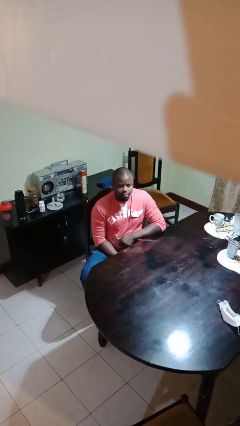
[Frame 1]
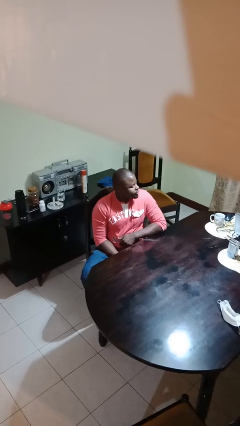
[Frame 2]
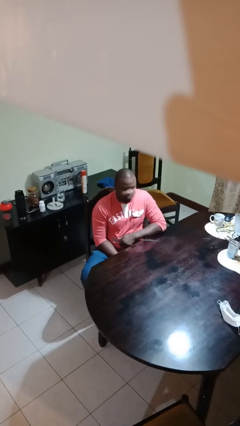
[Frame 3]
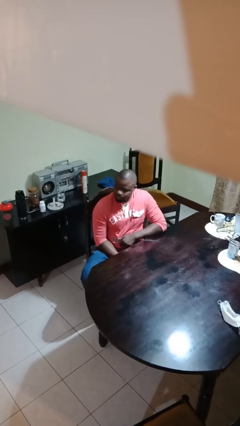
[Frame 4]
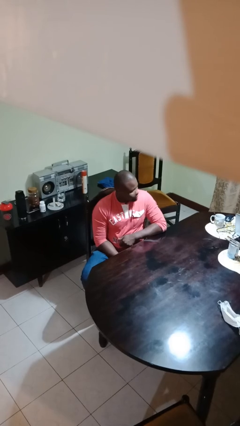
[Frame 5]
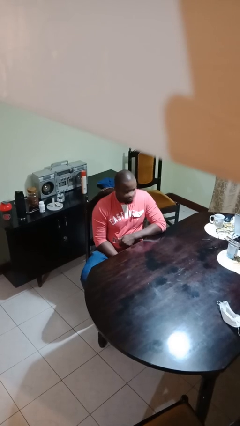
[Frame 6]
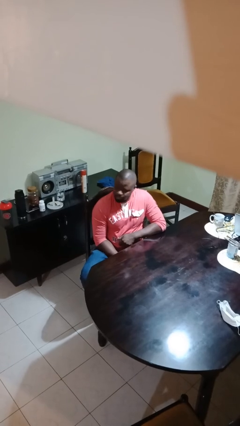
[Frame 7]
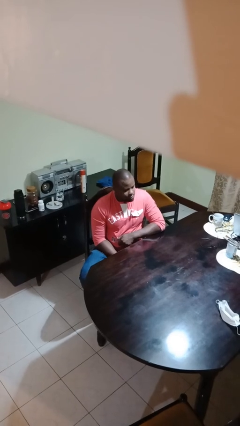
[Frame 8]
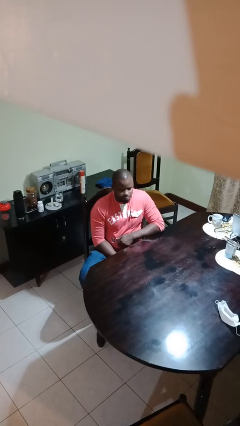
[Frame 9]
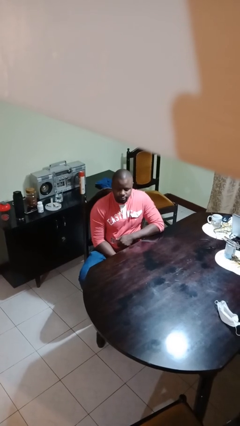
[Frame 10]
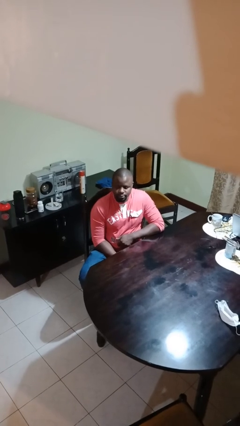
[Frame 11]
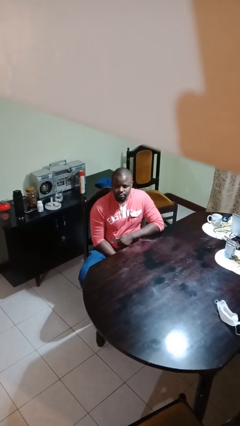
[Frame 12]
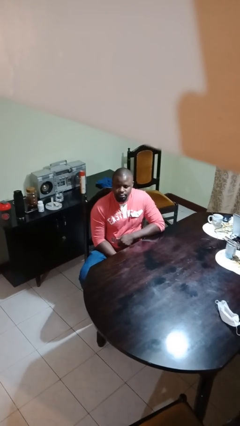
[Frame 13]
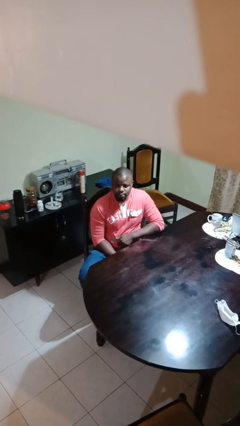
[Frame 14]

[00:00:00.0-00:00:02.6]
person shakes head

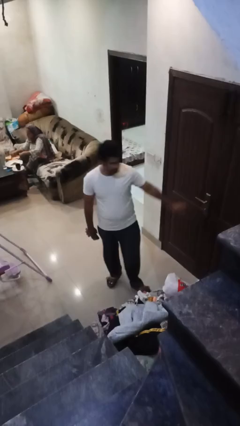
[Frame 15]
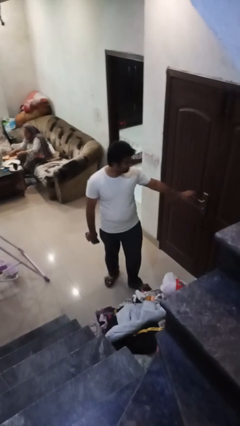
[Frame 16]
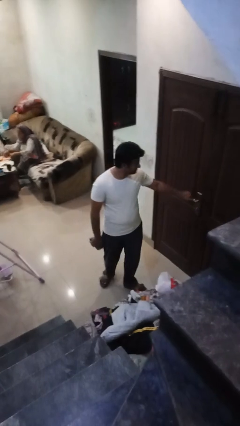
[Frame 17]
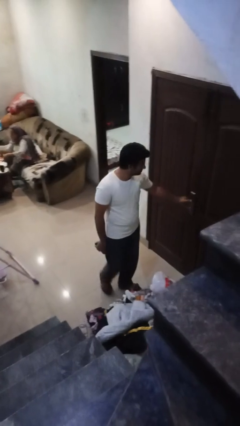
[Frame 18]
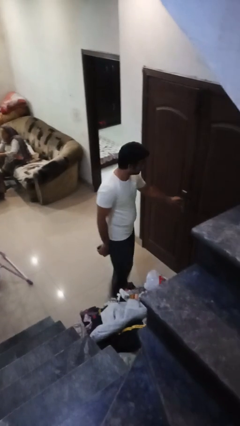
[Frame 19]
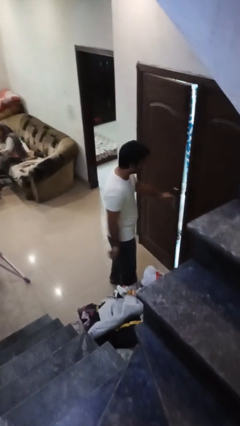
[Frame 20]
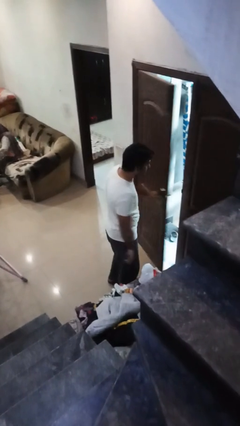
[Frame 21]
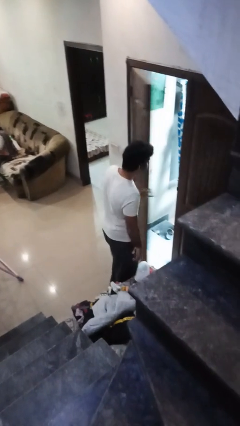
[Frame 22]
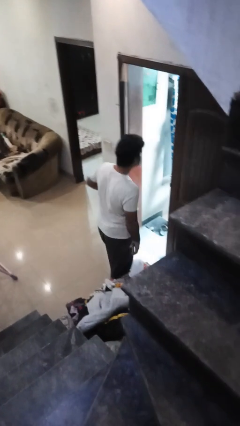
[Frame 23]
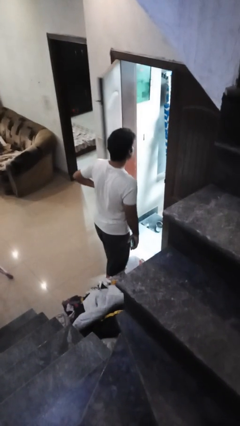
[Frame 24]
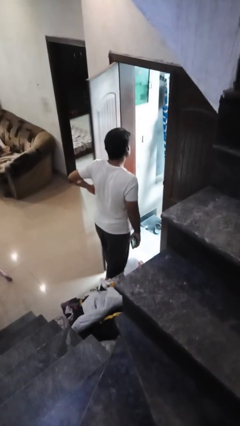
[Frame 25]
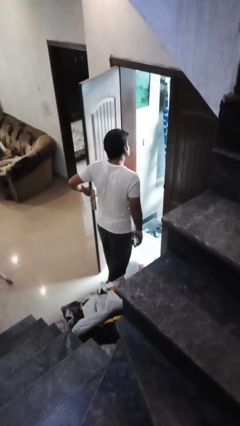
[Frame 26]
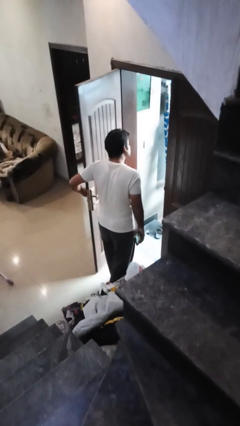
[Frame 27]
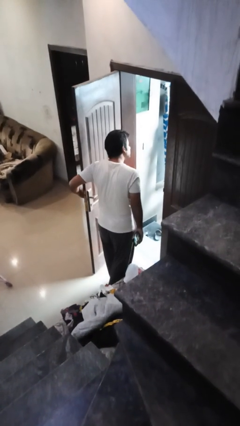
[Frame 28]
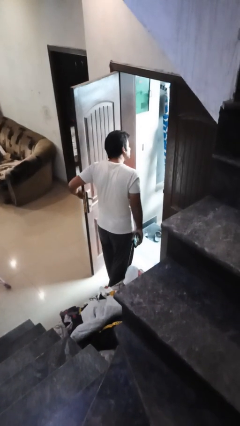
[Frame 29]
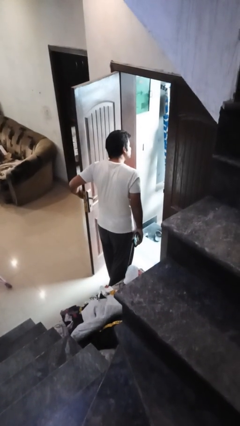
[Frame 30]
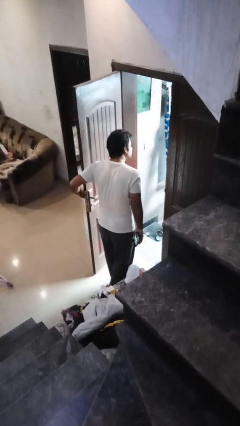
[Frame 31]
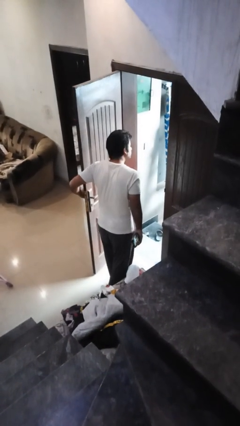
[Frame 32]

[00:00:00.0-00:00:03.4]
person opens facility door

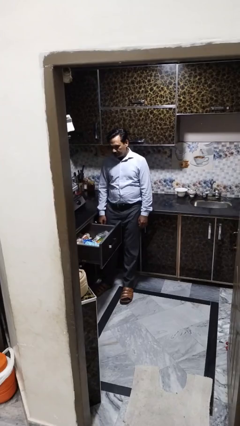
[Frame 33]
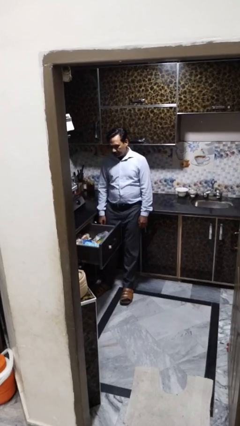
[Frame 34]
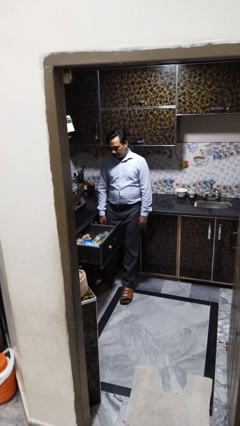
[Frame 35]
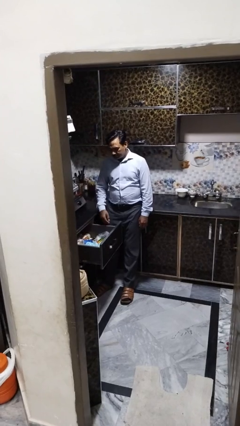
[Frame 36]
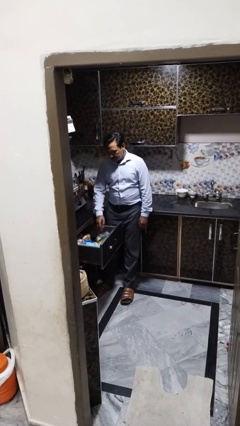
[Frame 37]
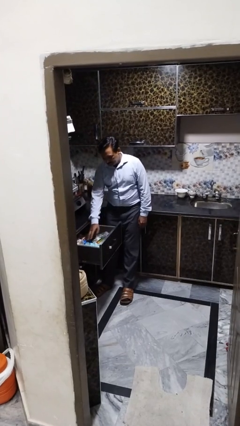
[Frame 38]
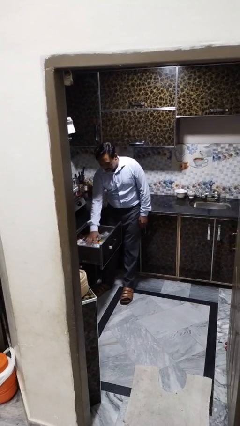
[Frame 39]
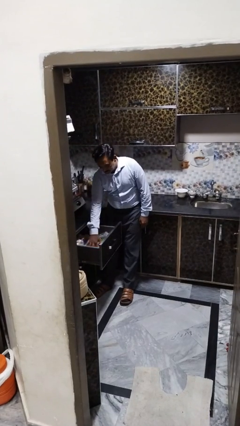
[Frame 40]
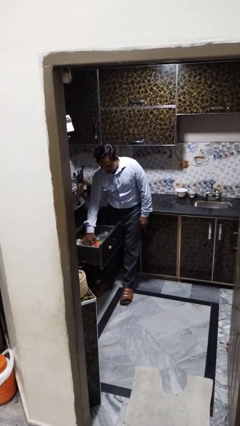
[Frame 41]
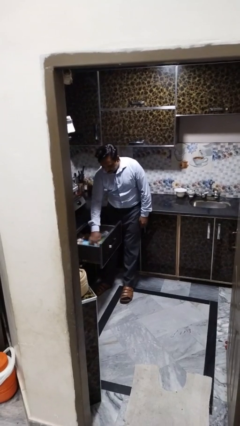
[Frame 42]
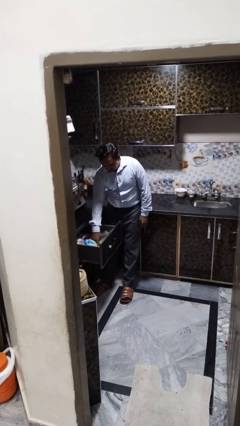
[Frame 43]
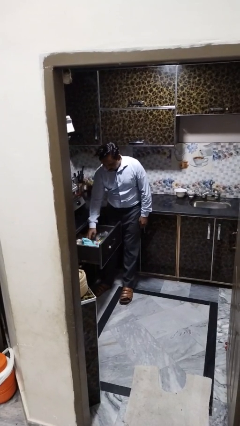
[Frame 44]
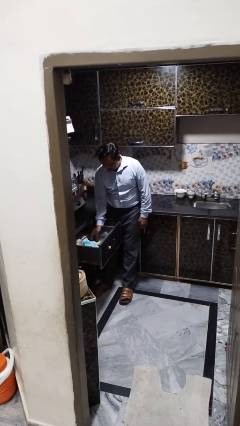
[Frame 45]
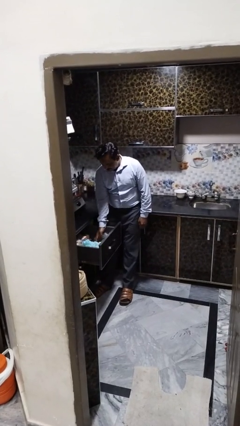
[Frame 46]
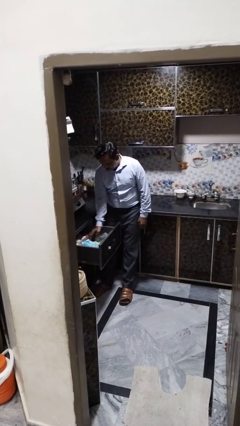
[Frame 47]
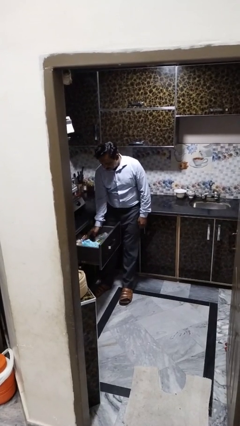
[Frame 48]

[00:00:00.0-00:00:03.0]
person searches in kitchen drawer

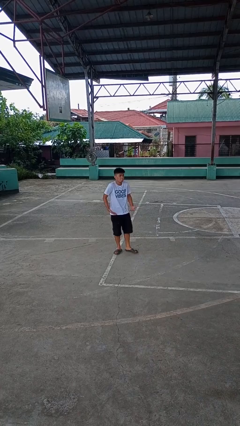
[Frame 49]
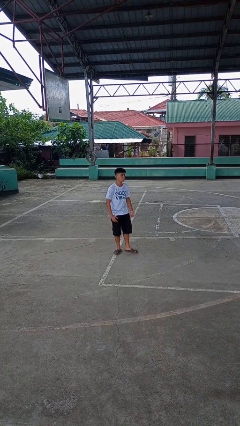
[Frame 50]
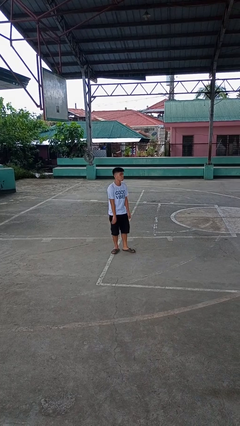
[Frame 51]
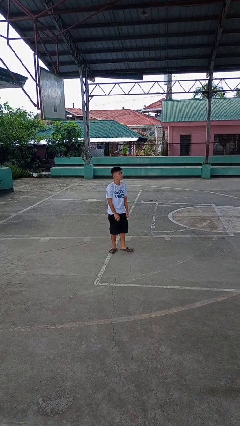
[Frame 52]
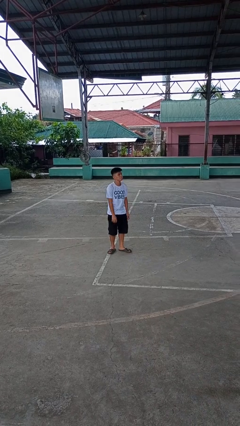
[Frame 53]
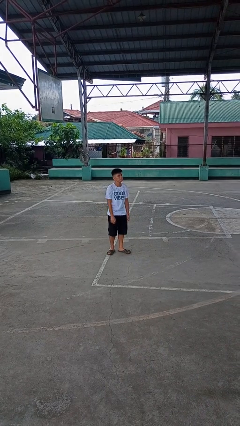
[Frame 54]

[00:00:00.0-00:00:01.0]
person shrugs

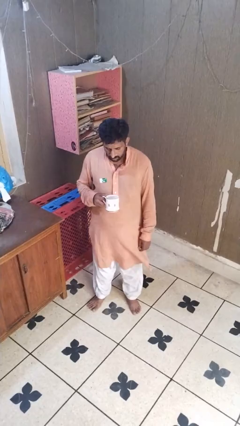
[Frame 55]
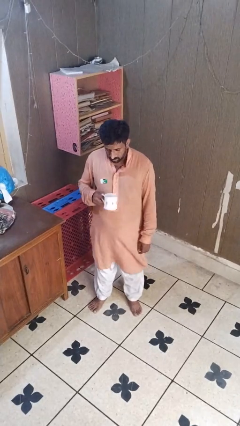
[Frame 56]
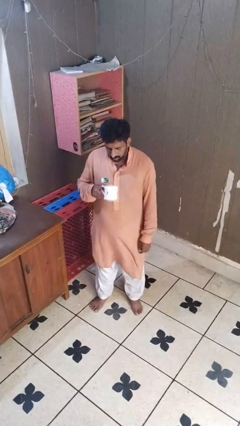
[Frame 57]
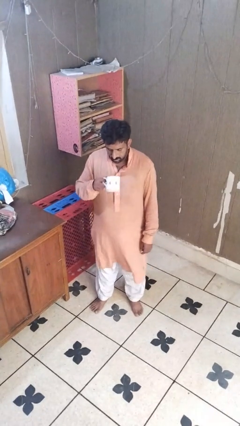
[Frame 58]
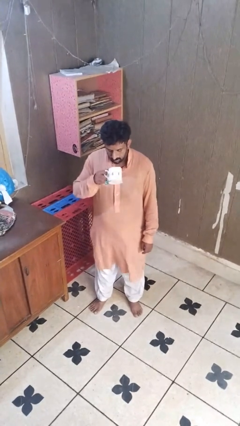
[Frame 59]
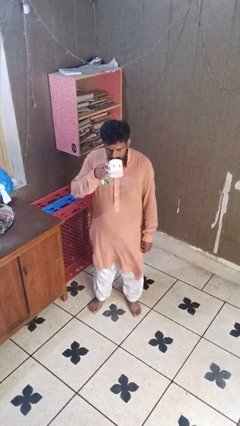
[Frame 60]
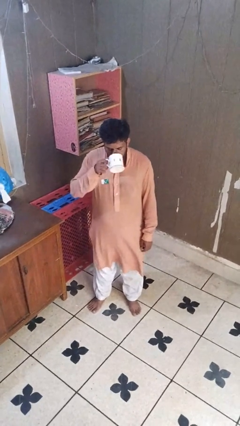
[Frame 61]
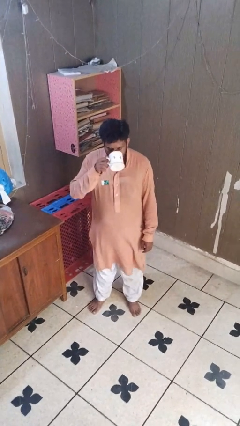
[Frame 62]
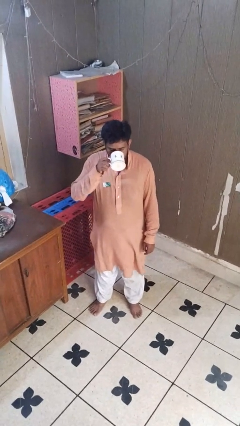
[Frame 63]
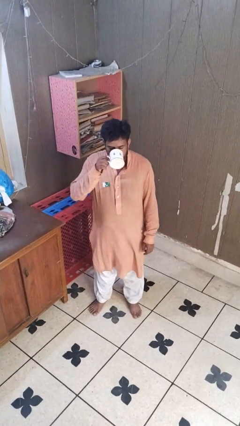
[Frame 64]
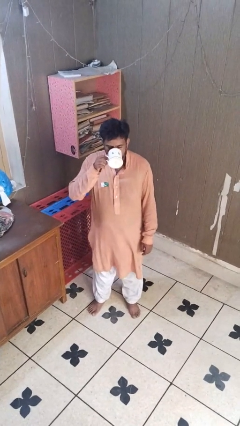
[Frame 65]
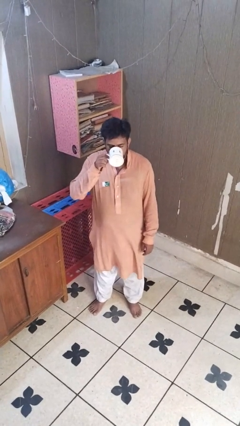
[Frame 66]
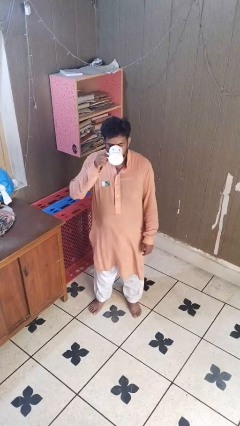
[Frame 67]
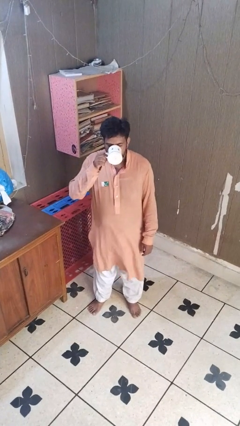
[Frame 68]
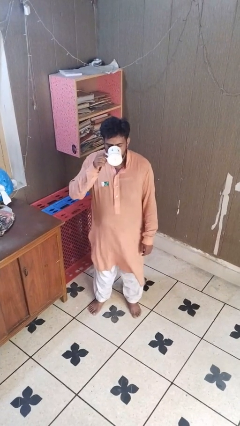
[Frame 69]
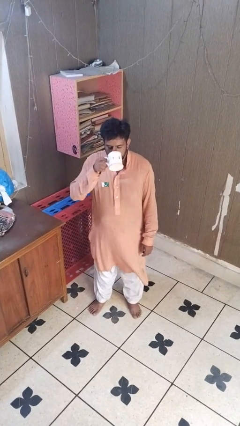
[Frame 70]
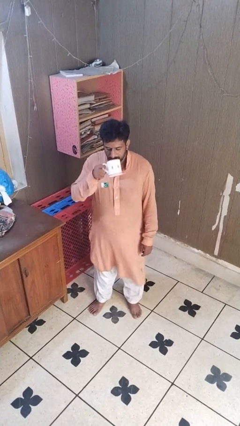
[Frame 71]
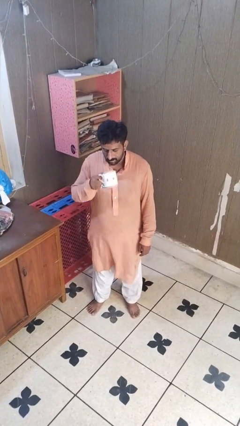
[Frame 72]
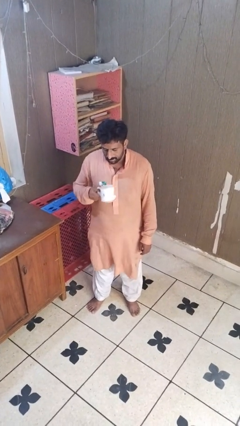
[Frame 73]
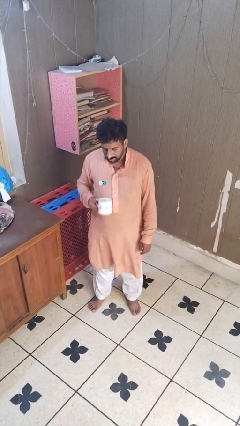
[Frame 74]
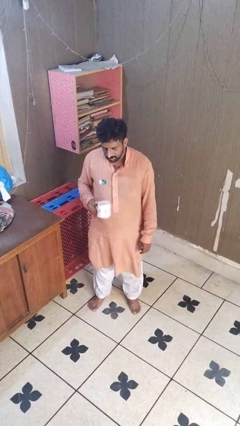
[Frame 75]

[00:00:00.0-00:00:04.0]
person drinks from mug

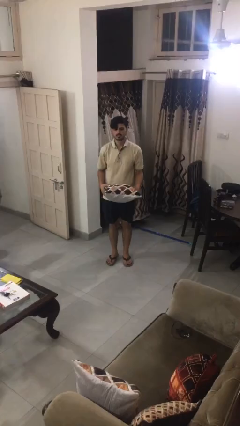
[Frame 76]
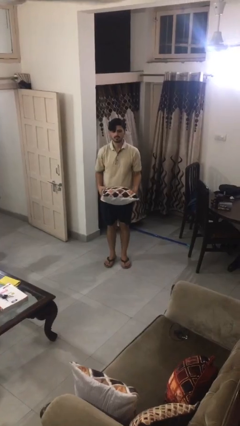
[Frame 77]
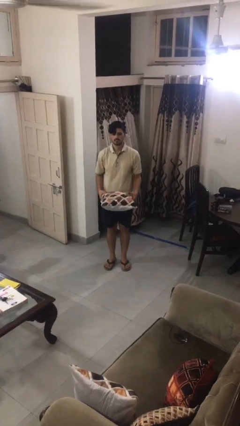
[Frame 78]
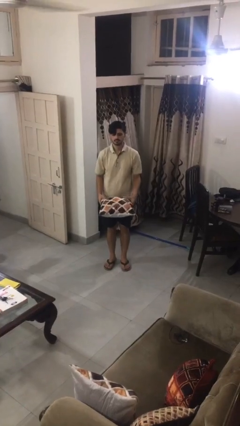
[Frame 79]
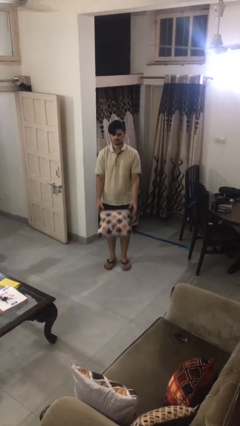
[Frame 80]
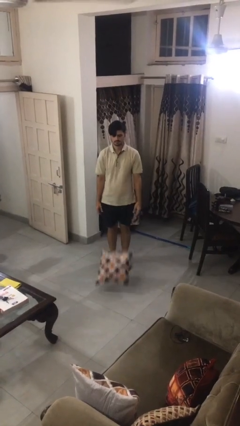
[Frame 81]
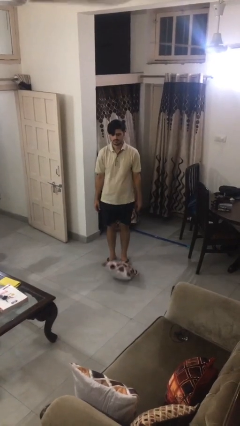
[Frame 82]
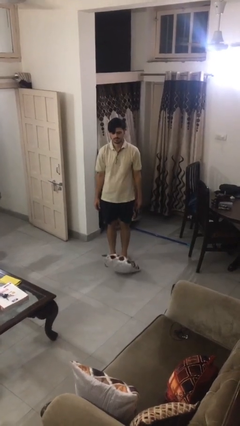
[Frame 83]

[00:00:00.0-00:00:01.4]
person drops object

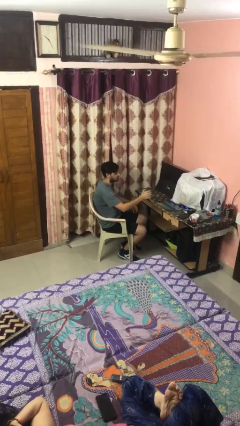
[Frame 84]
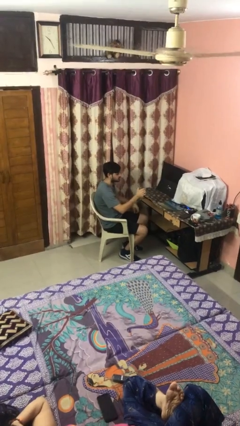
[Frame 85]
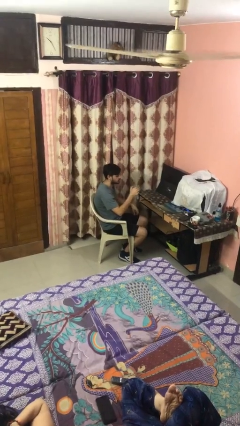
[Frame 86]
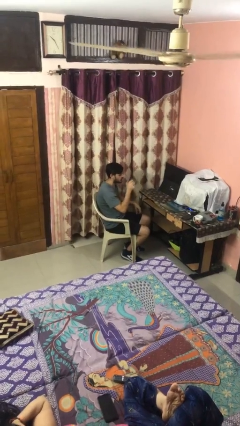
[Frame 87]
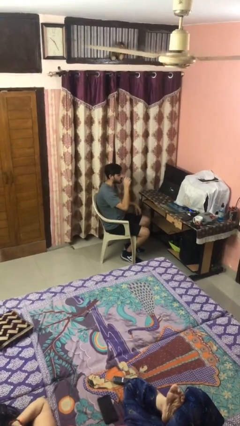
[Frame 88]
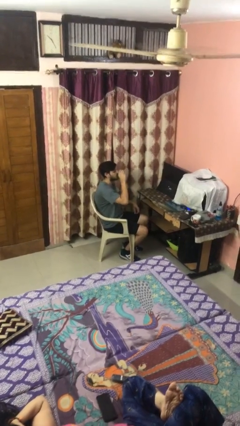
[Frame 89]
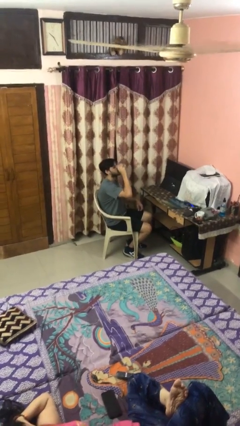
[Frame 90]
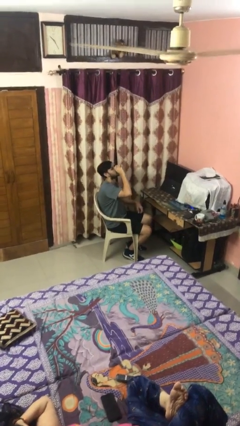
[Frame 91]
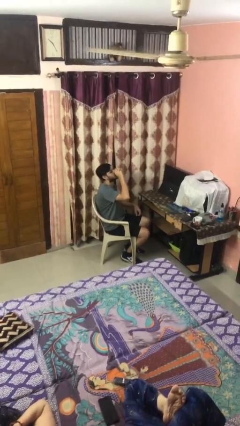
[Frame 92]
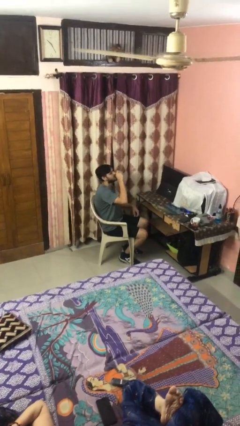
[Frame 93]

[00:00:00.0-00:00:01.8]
person drinks from shotglass
